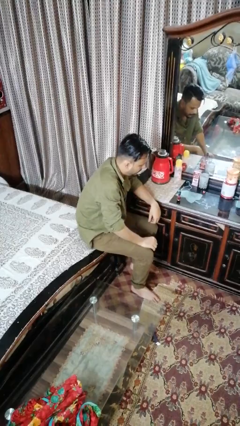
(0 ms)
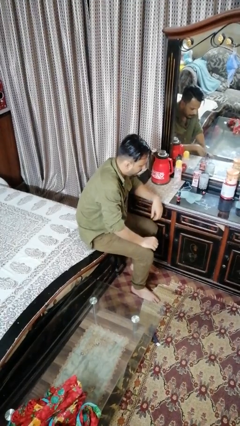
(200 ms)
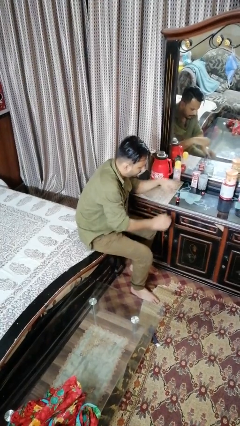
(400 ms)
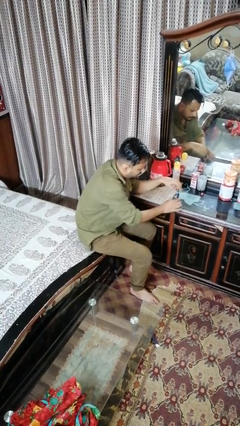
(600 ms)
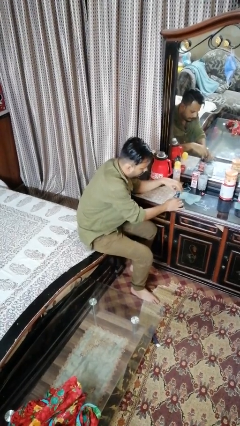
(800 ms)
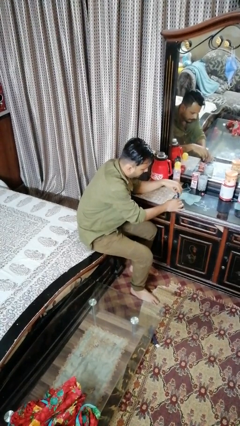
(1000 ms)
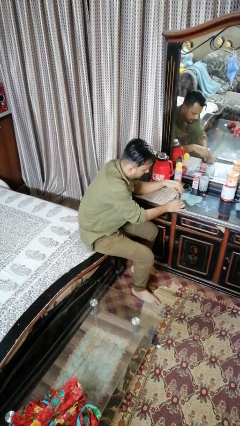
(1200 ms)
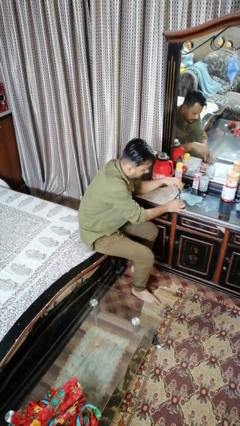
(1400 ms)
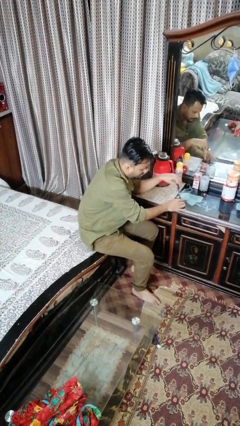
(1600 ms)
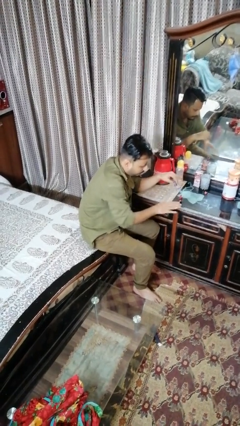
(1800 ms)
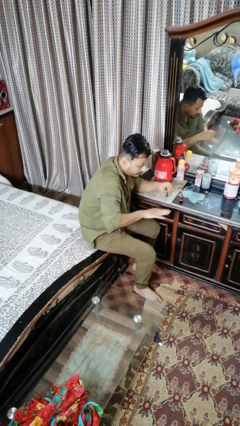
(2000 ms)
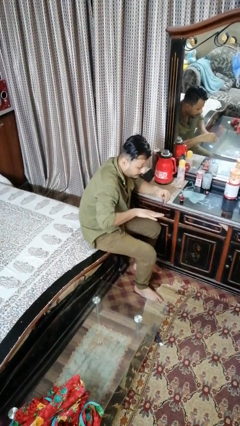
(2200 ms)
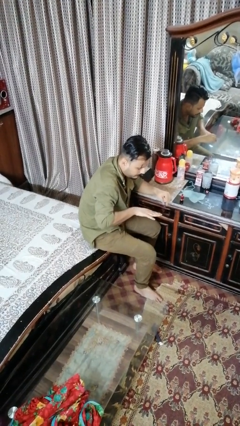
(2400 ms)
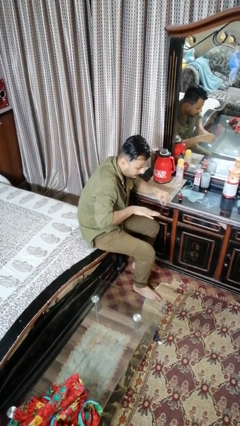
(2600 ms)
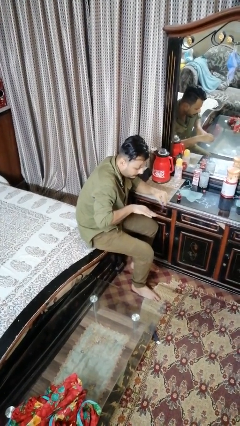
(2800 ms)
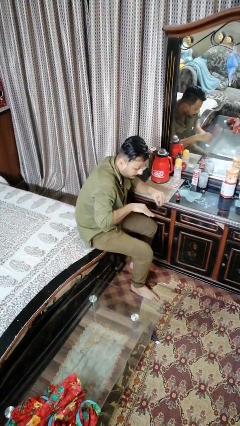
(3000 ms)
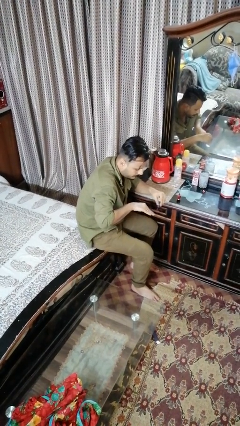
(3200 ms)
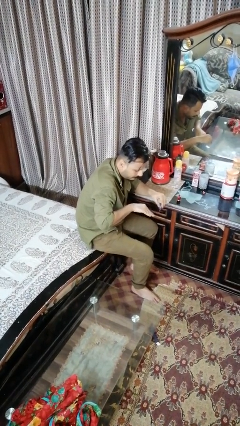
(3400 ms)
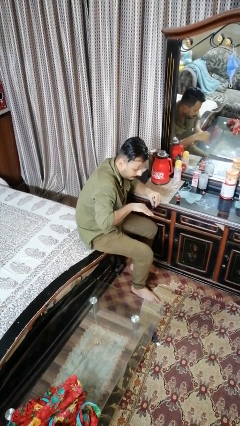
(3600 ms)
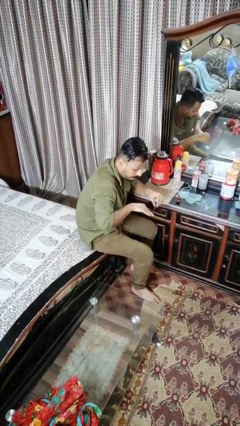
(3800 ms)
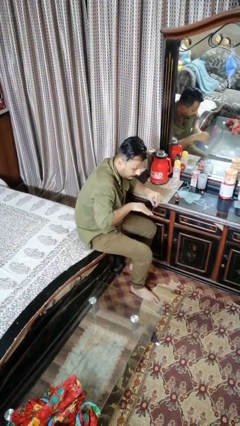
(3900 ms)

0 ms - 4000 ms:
person paints fingernails

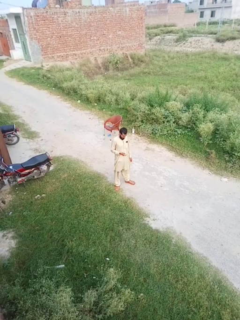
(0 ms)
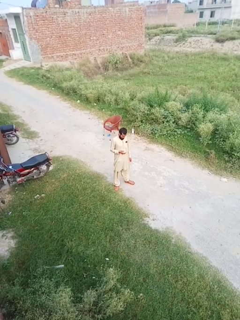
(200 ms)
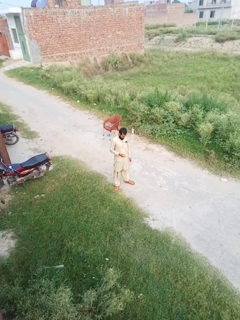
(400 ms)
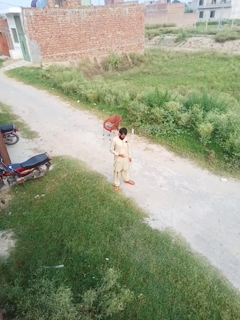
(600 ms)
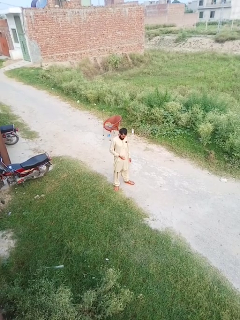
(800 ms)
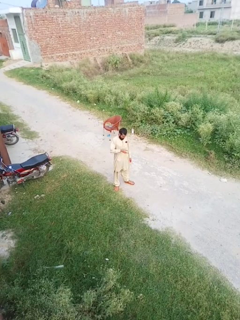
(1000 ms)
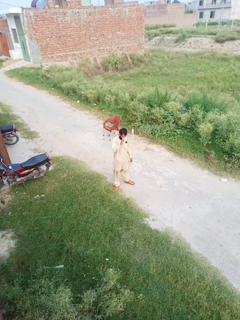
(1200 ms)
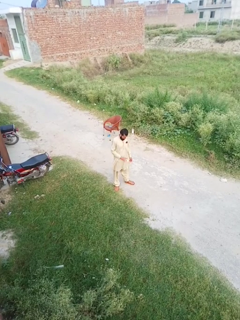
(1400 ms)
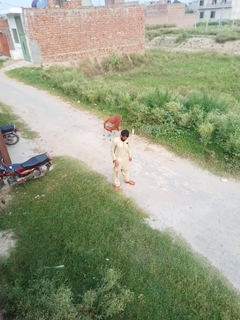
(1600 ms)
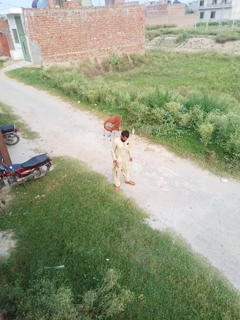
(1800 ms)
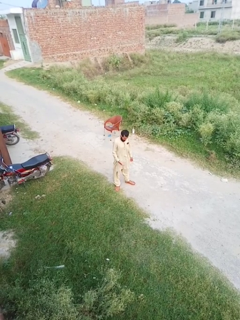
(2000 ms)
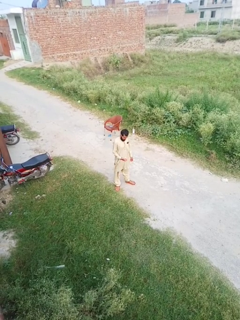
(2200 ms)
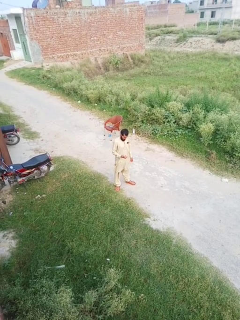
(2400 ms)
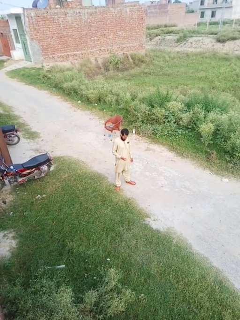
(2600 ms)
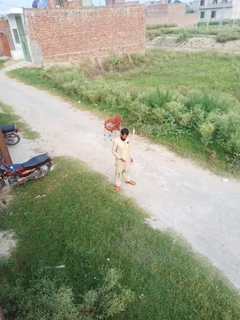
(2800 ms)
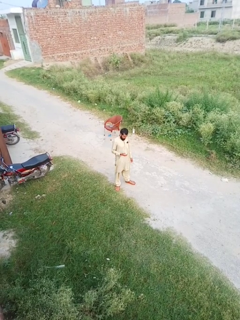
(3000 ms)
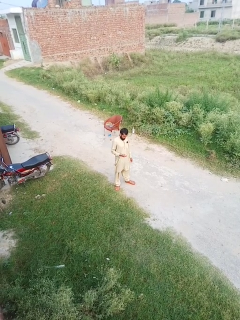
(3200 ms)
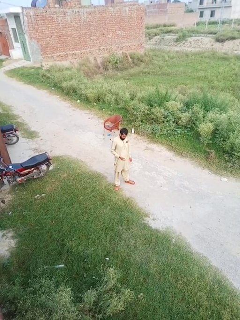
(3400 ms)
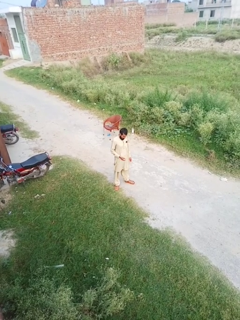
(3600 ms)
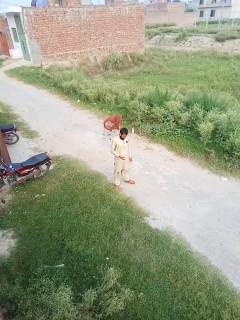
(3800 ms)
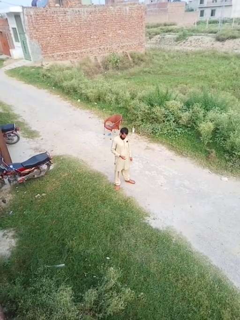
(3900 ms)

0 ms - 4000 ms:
person bounces ball on floor

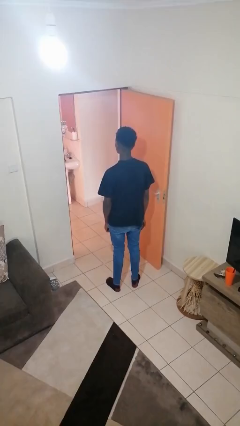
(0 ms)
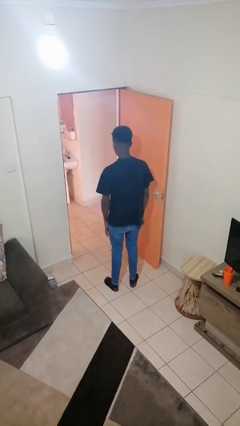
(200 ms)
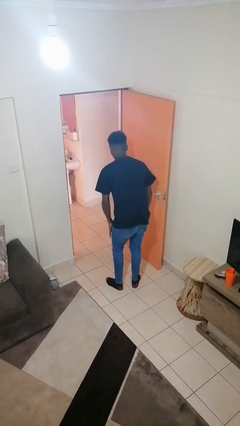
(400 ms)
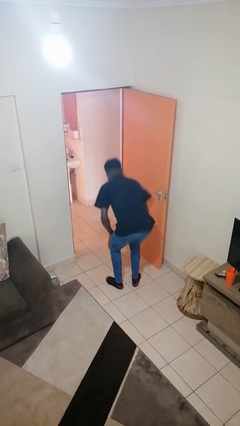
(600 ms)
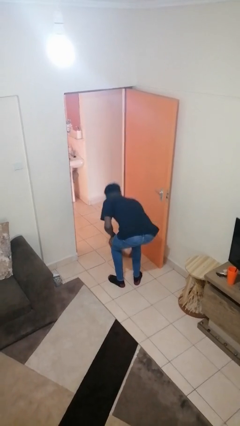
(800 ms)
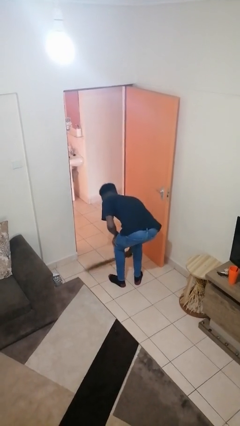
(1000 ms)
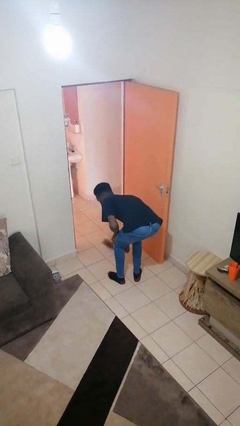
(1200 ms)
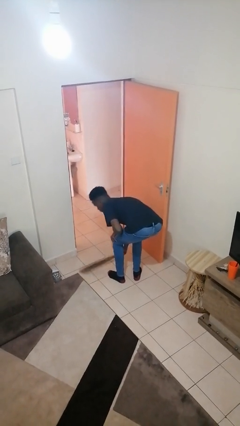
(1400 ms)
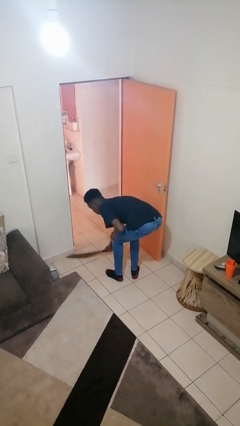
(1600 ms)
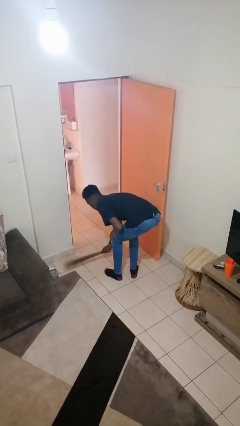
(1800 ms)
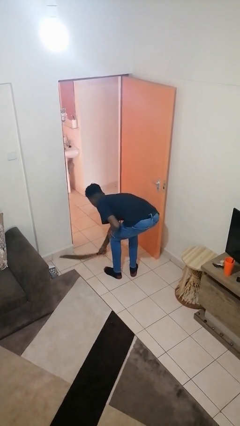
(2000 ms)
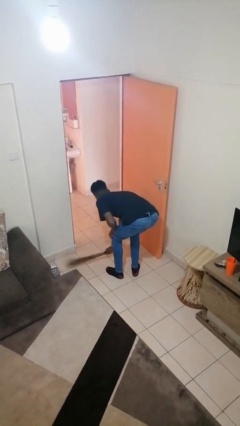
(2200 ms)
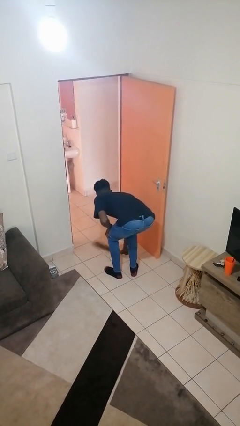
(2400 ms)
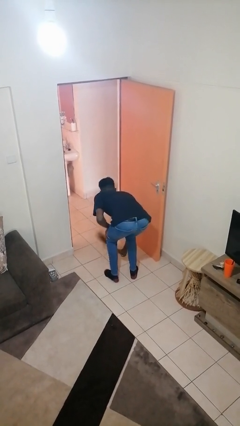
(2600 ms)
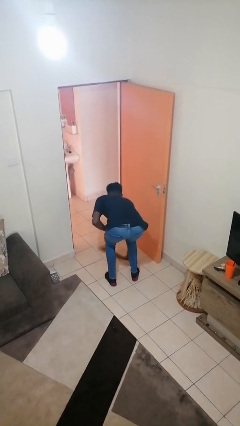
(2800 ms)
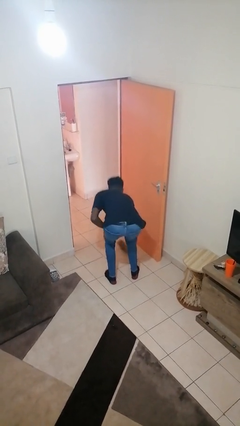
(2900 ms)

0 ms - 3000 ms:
person sweeps floor

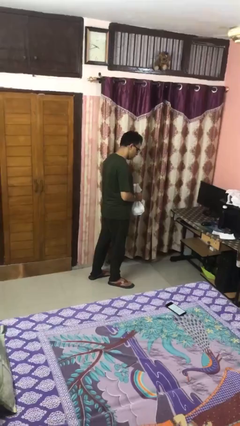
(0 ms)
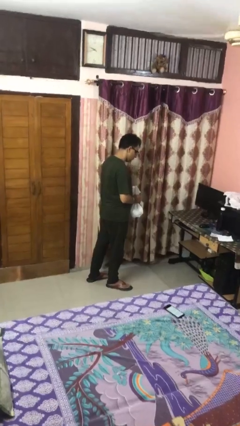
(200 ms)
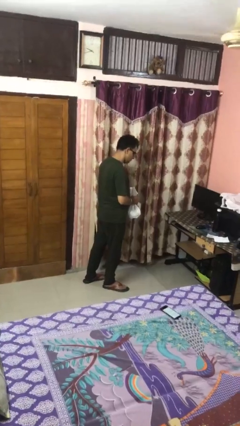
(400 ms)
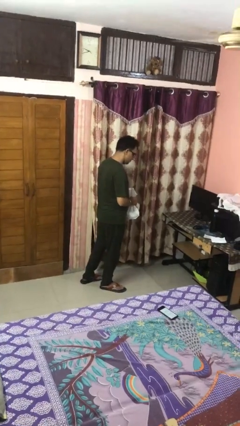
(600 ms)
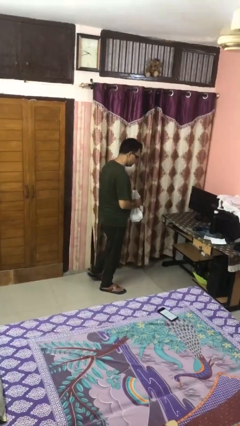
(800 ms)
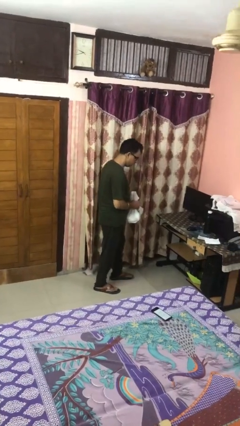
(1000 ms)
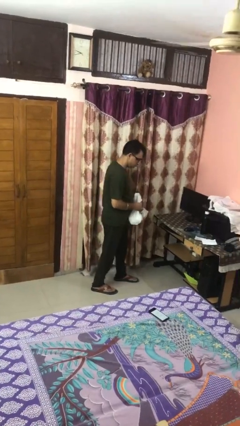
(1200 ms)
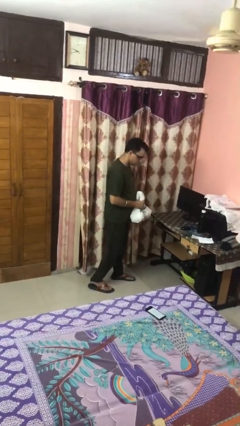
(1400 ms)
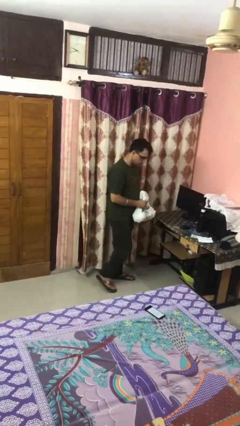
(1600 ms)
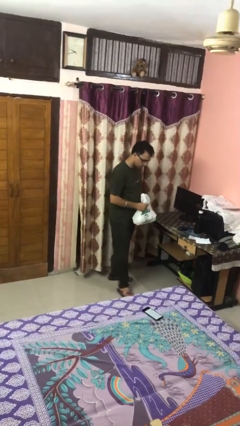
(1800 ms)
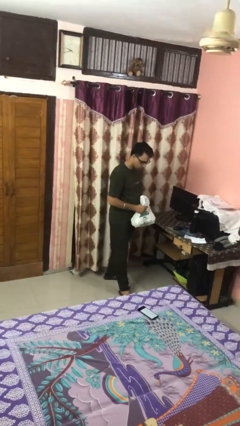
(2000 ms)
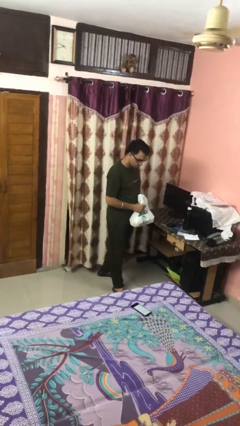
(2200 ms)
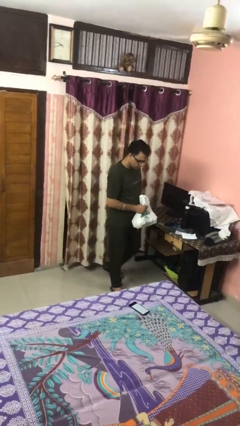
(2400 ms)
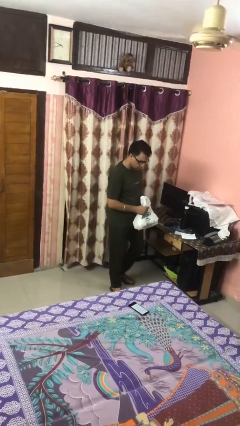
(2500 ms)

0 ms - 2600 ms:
person carries groceries

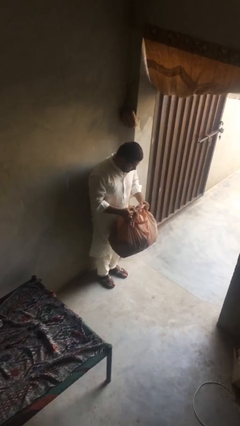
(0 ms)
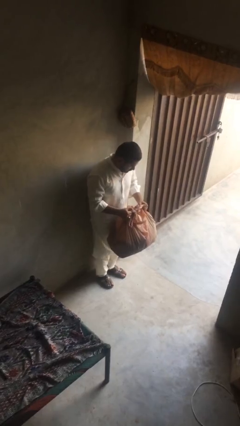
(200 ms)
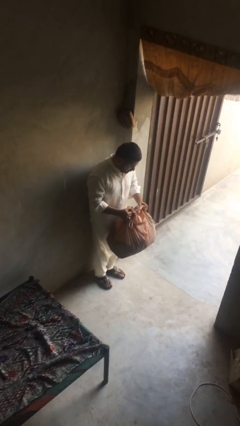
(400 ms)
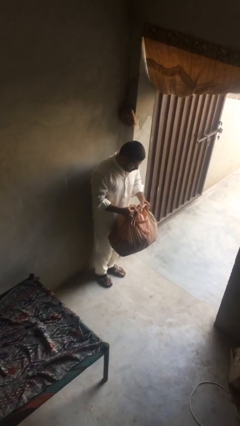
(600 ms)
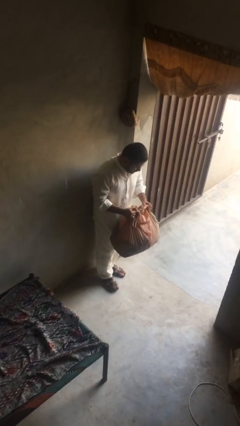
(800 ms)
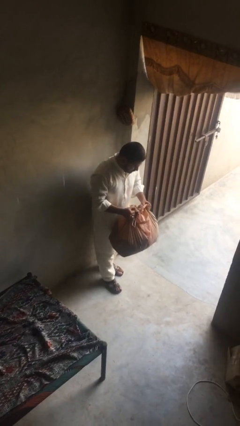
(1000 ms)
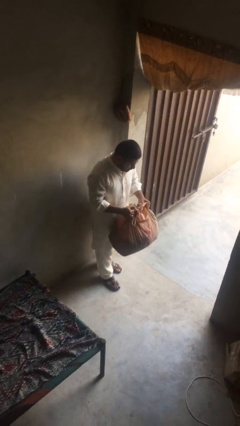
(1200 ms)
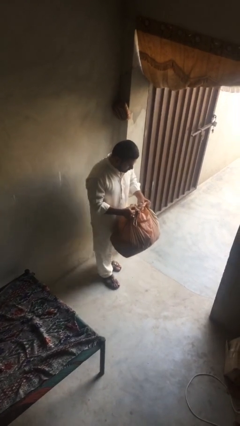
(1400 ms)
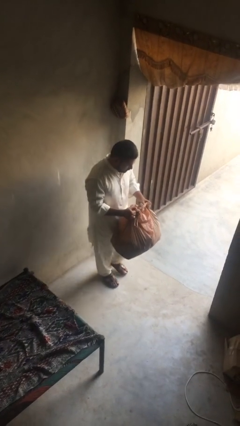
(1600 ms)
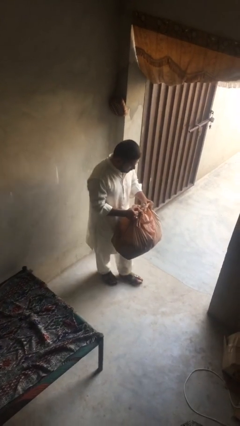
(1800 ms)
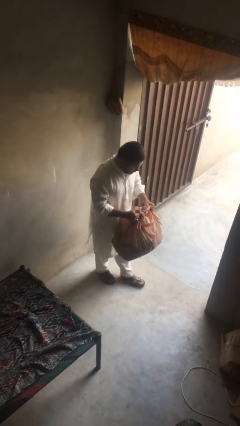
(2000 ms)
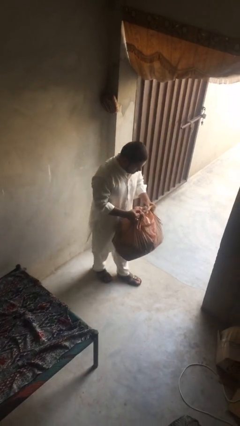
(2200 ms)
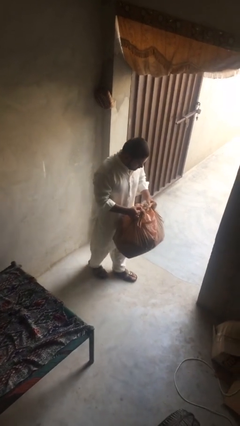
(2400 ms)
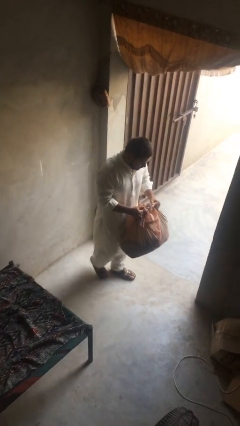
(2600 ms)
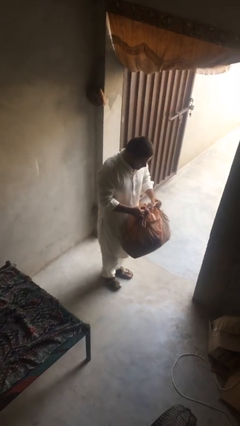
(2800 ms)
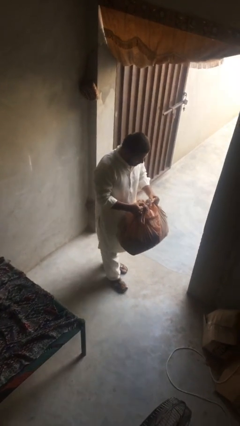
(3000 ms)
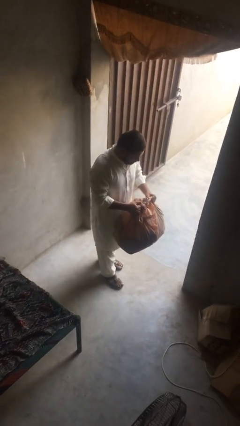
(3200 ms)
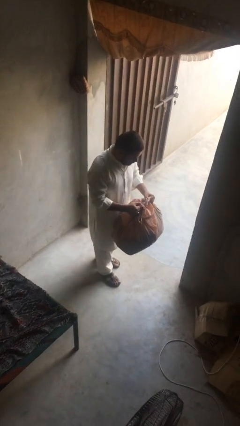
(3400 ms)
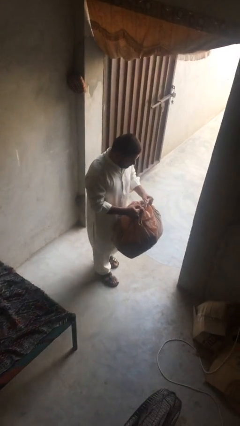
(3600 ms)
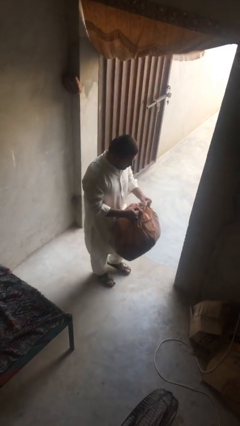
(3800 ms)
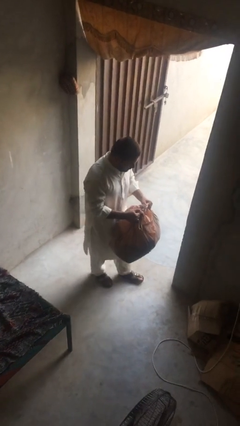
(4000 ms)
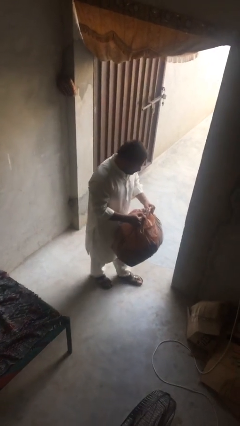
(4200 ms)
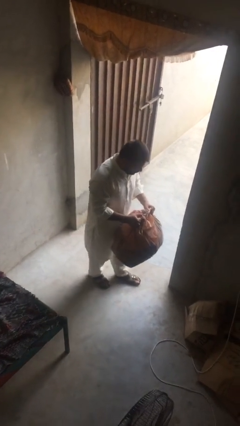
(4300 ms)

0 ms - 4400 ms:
person carries heavy object

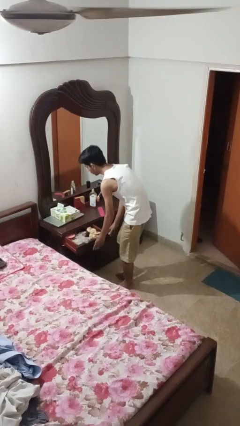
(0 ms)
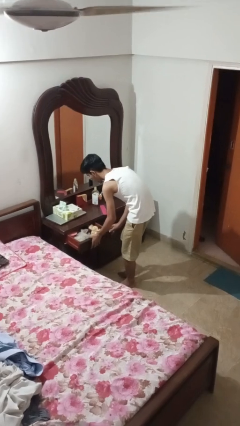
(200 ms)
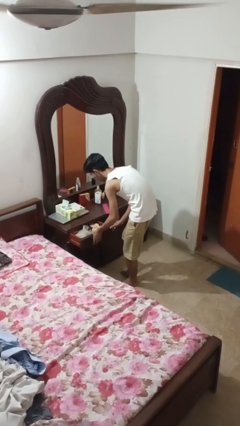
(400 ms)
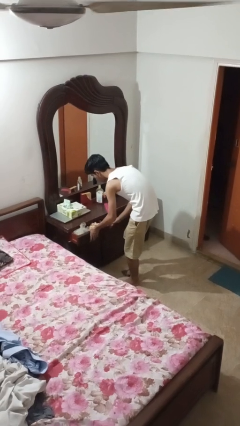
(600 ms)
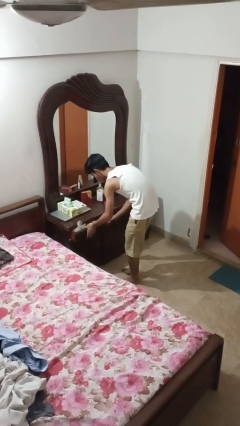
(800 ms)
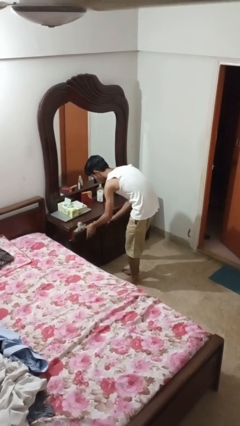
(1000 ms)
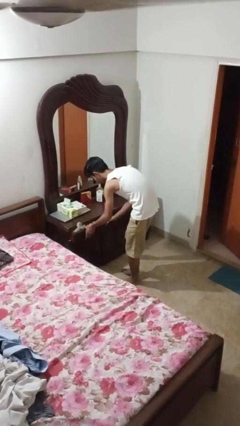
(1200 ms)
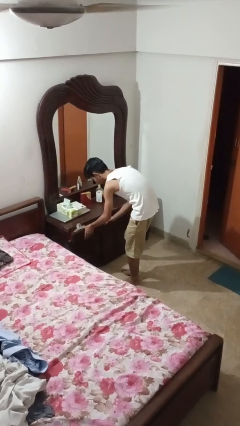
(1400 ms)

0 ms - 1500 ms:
person closes dresser drawer
